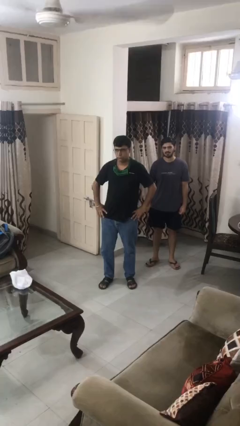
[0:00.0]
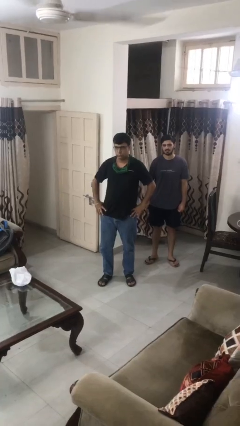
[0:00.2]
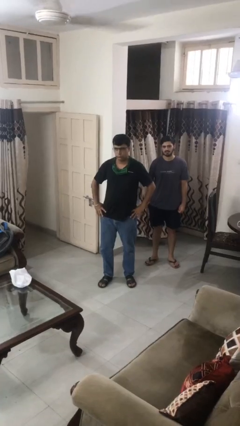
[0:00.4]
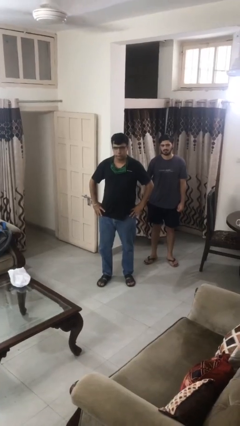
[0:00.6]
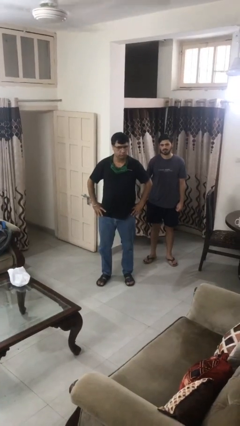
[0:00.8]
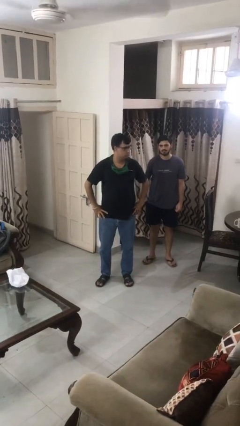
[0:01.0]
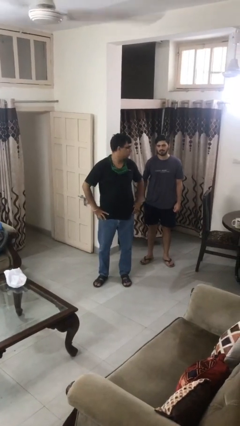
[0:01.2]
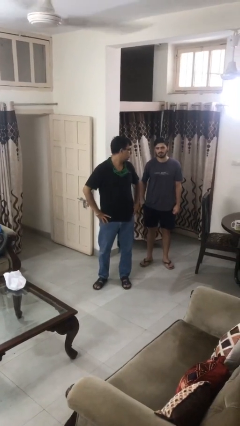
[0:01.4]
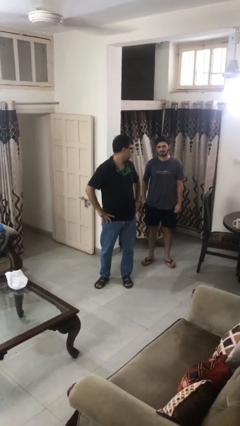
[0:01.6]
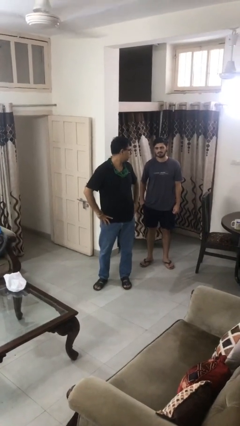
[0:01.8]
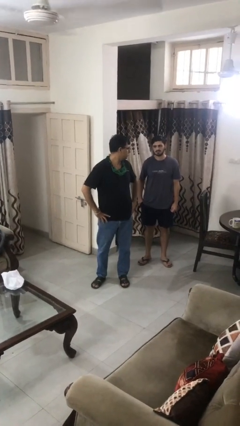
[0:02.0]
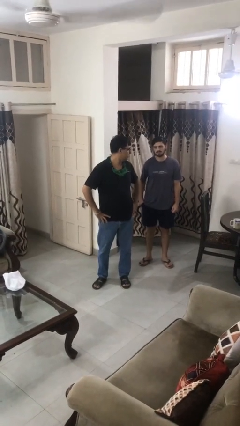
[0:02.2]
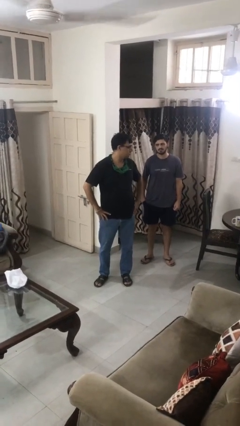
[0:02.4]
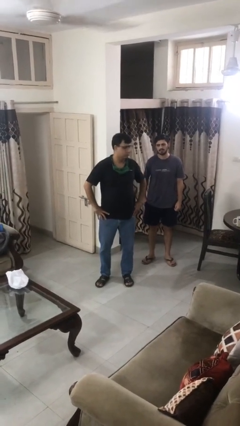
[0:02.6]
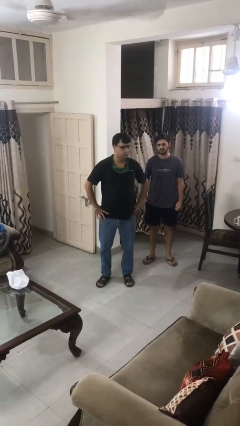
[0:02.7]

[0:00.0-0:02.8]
person looks over shoulder

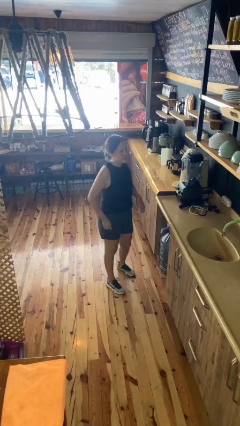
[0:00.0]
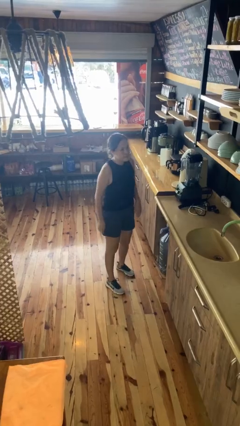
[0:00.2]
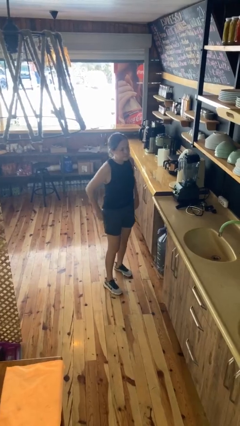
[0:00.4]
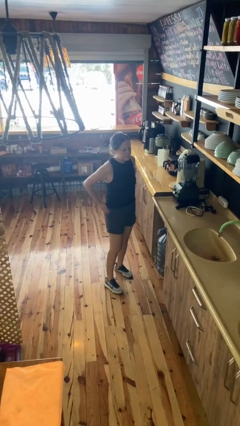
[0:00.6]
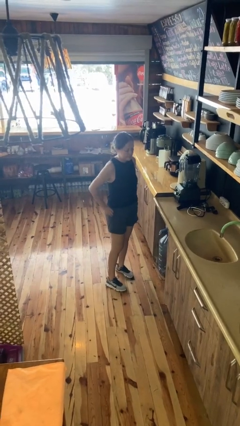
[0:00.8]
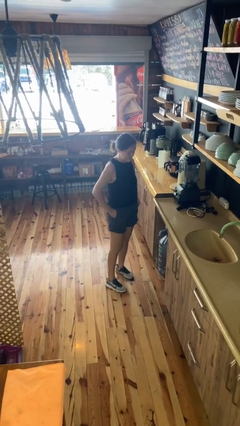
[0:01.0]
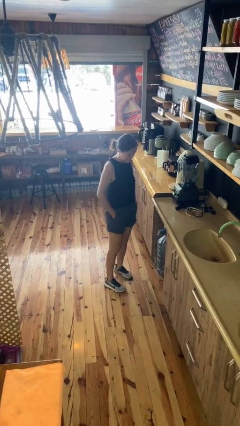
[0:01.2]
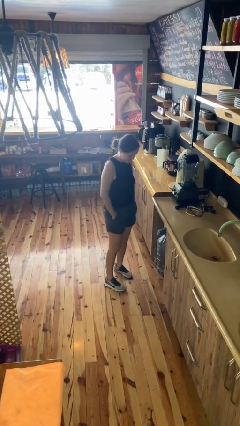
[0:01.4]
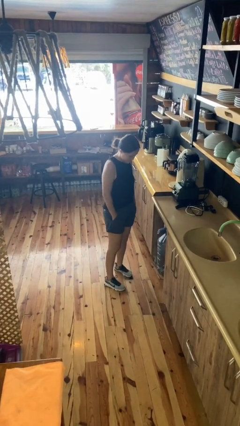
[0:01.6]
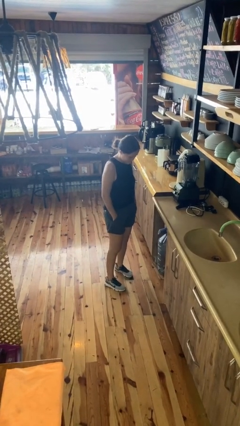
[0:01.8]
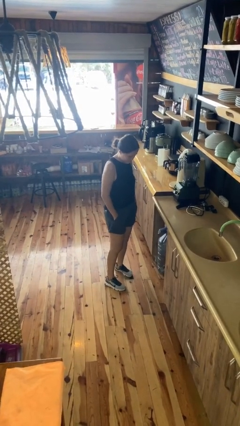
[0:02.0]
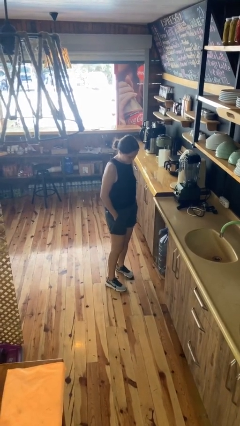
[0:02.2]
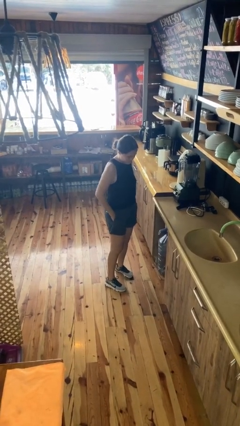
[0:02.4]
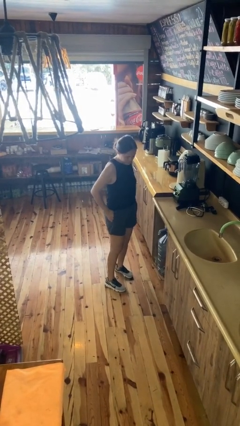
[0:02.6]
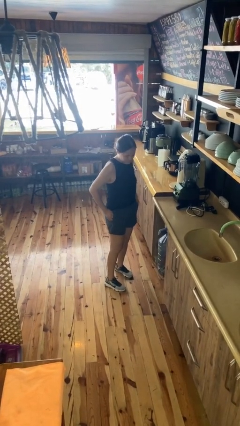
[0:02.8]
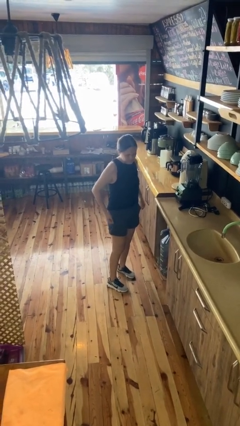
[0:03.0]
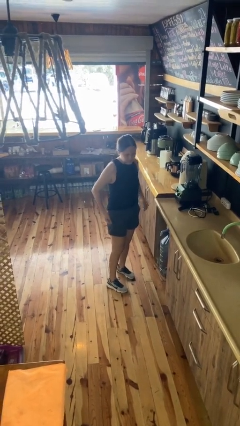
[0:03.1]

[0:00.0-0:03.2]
person puts hands in back pockets

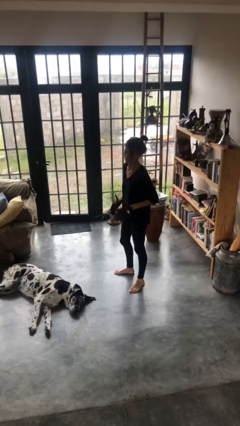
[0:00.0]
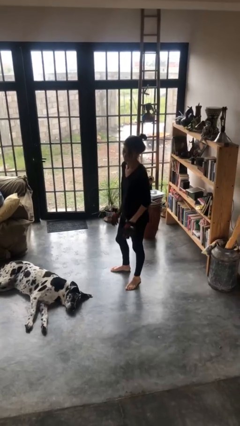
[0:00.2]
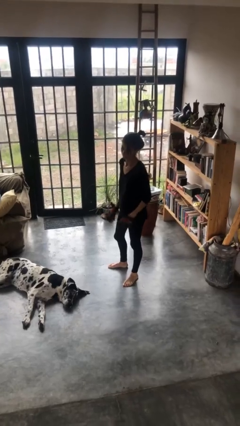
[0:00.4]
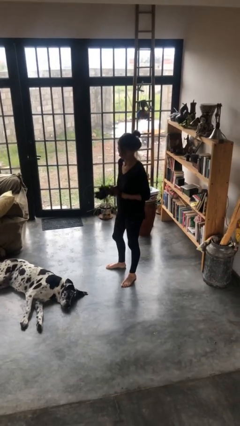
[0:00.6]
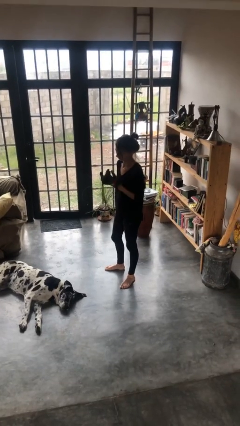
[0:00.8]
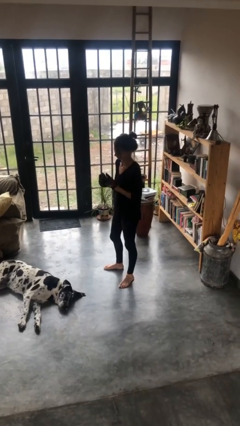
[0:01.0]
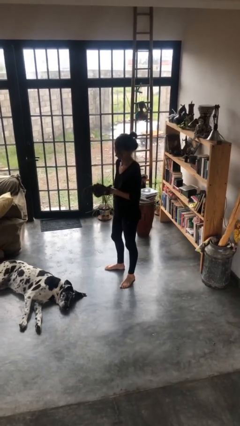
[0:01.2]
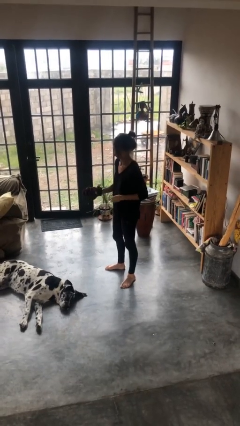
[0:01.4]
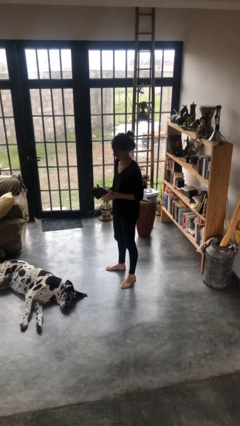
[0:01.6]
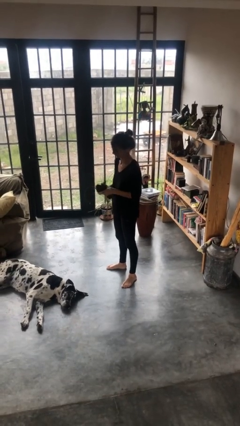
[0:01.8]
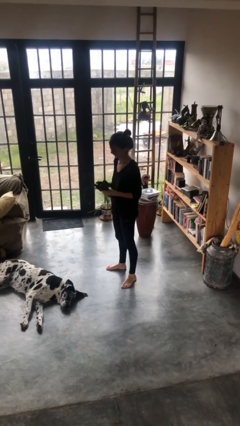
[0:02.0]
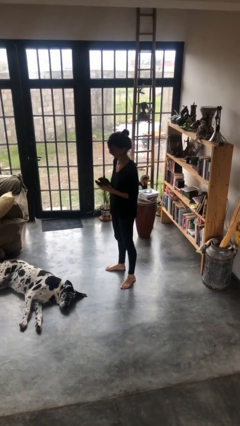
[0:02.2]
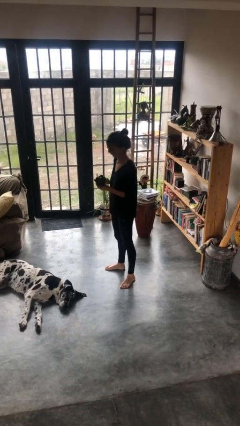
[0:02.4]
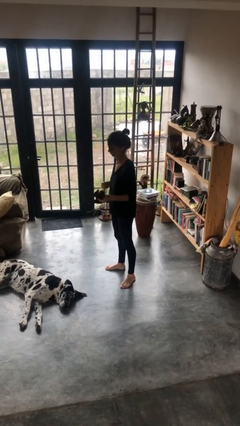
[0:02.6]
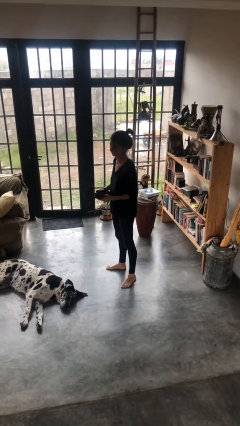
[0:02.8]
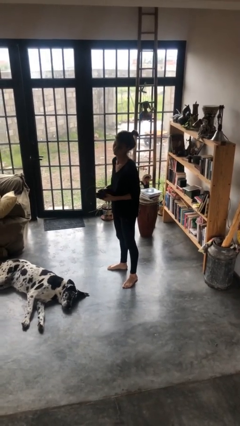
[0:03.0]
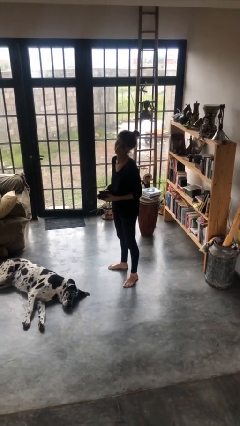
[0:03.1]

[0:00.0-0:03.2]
person takes off gloves

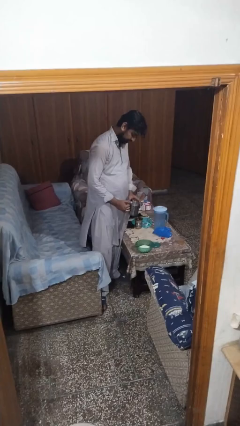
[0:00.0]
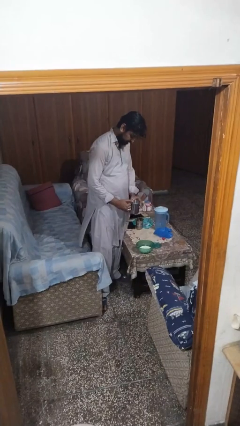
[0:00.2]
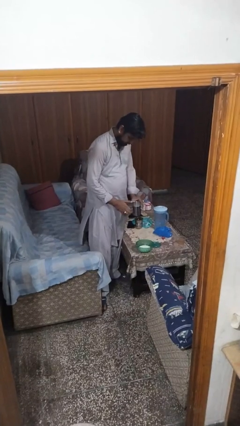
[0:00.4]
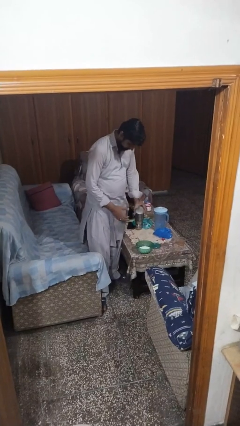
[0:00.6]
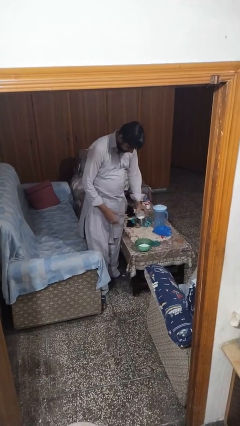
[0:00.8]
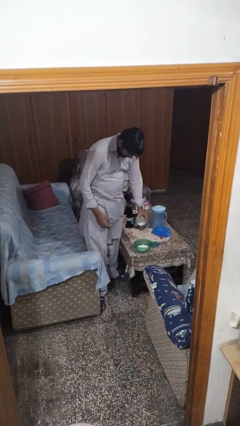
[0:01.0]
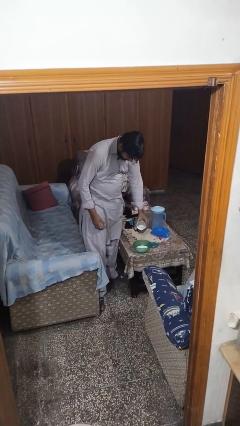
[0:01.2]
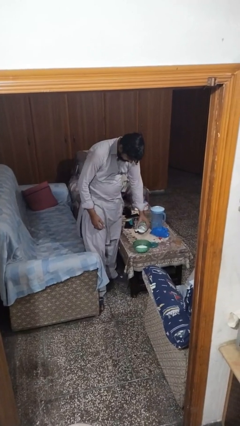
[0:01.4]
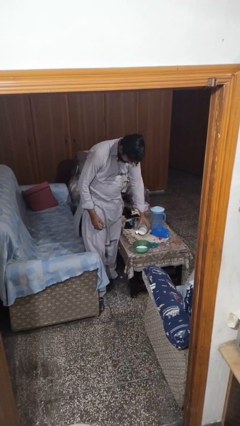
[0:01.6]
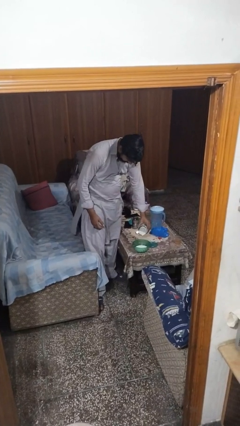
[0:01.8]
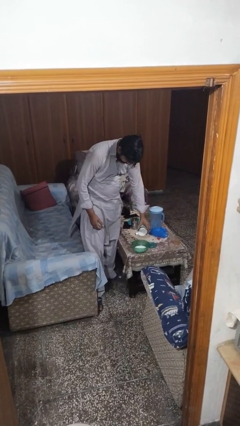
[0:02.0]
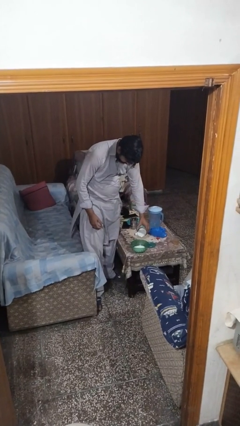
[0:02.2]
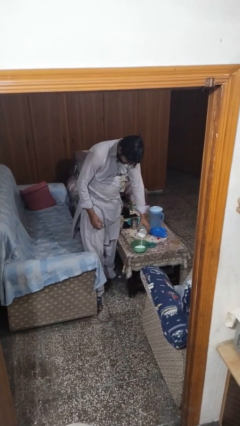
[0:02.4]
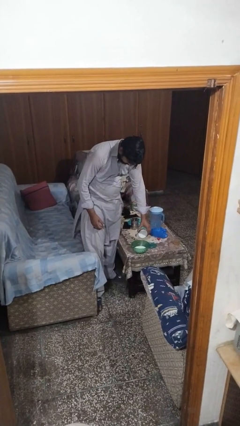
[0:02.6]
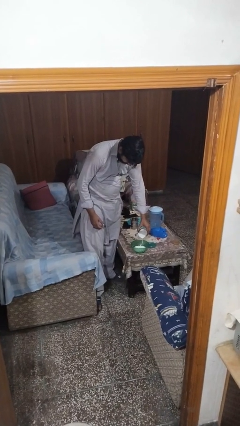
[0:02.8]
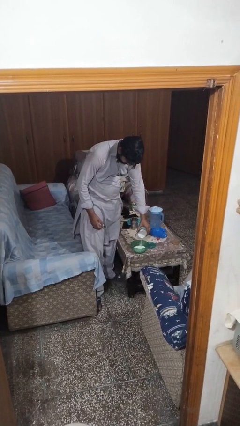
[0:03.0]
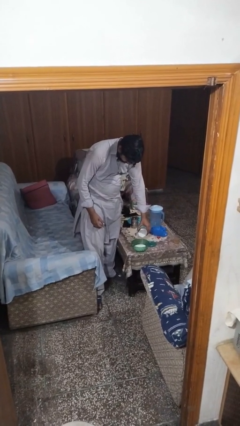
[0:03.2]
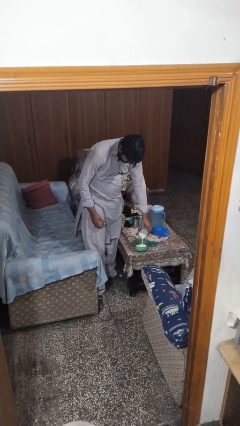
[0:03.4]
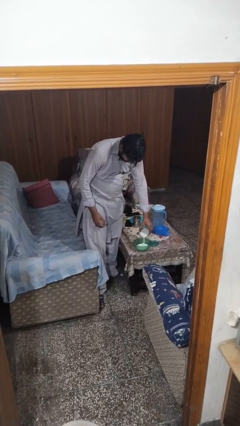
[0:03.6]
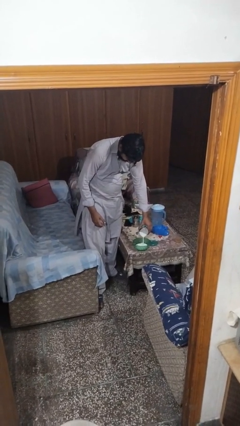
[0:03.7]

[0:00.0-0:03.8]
person pours into bowl

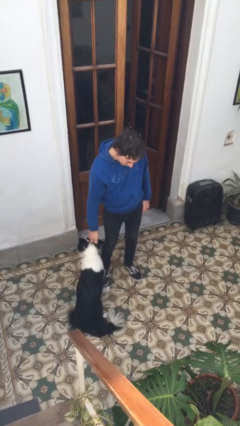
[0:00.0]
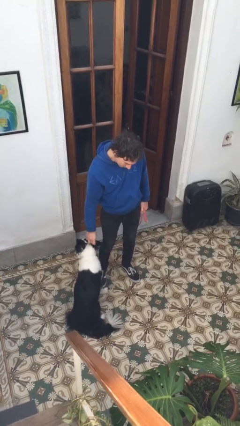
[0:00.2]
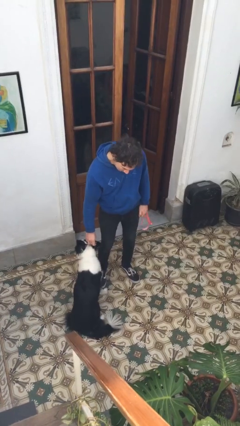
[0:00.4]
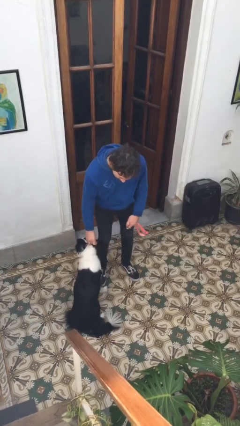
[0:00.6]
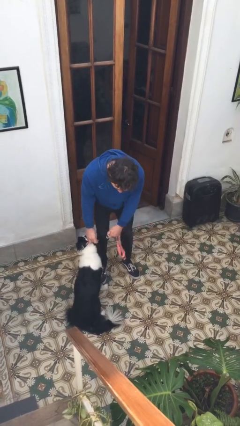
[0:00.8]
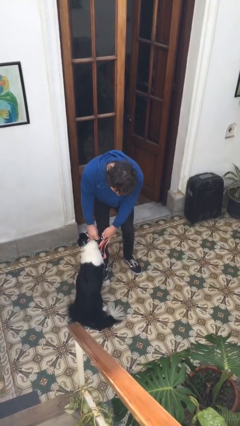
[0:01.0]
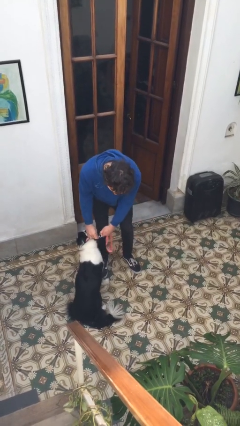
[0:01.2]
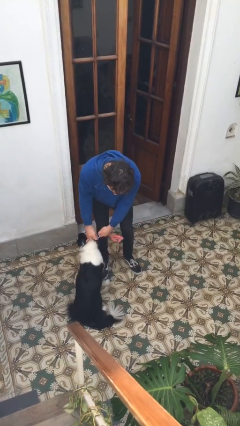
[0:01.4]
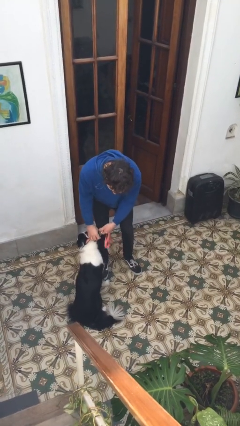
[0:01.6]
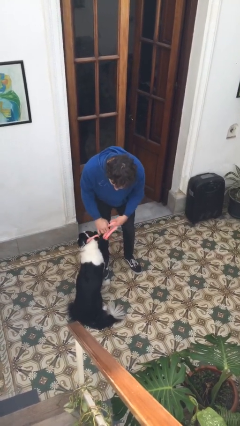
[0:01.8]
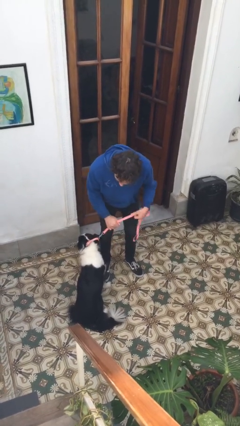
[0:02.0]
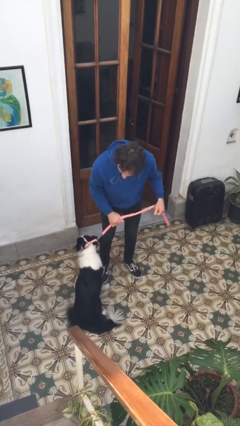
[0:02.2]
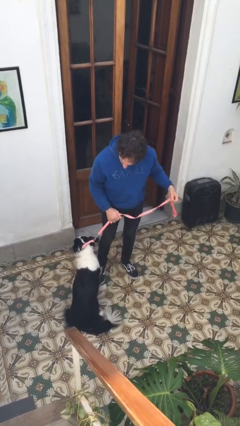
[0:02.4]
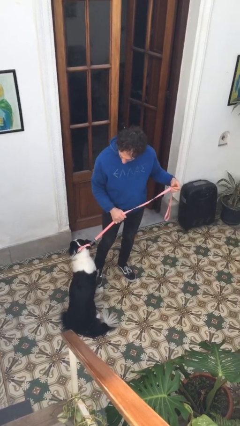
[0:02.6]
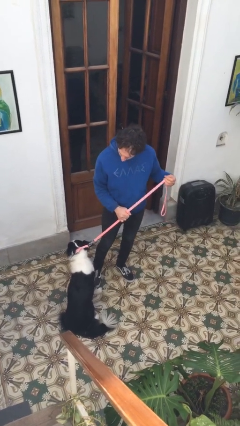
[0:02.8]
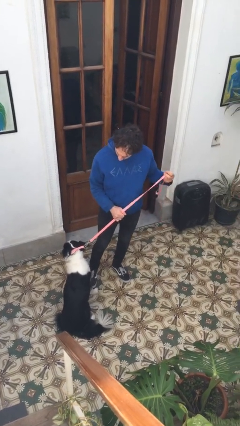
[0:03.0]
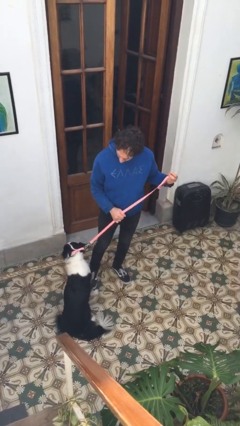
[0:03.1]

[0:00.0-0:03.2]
person attaches leash to dog

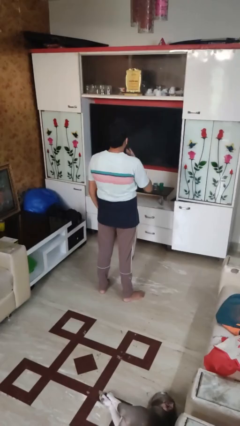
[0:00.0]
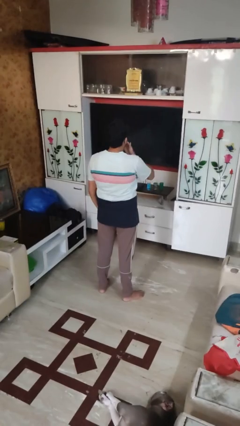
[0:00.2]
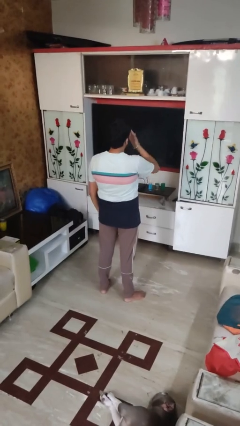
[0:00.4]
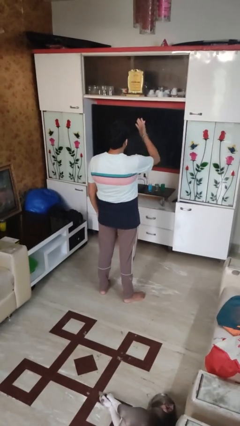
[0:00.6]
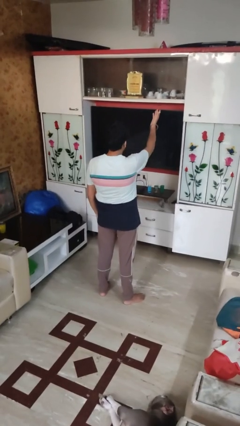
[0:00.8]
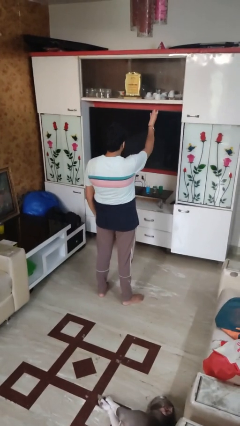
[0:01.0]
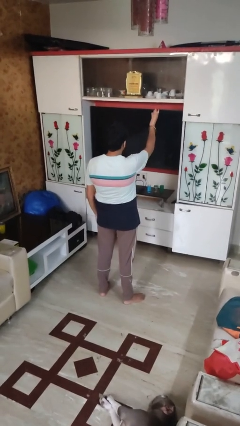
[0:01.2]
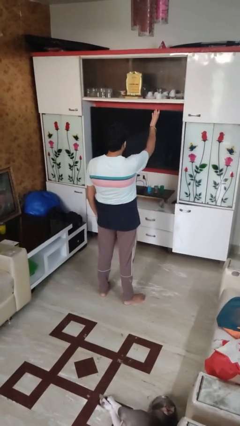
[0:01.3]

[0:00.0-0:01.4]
person gestures blow kiss
